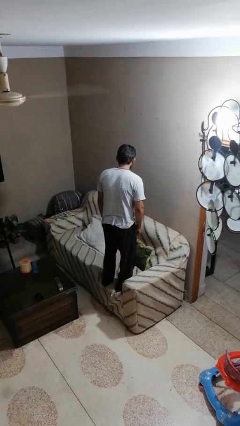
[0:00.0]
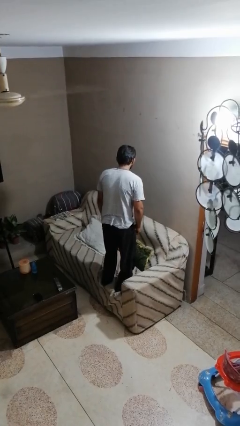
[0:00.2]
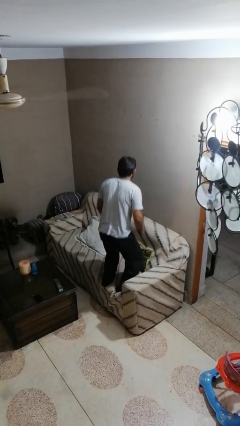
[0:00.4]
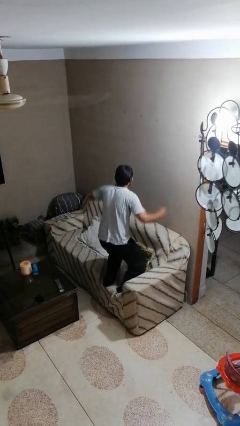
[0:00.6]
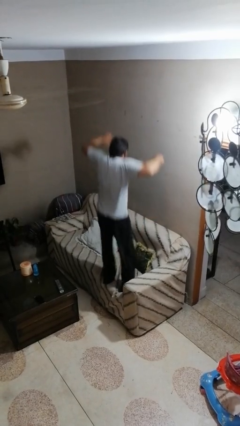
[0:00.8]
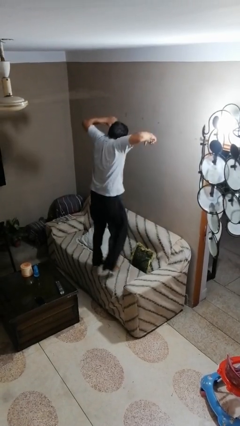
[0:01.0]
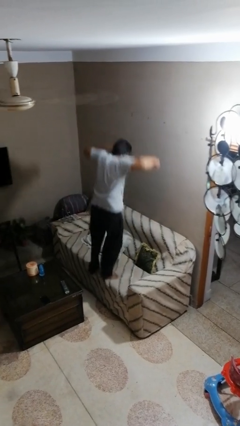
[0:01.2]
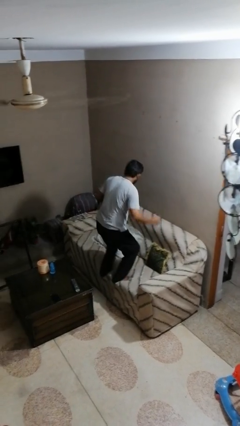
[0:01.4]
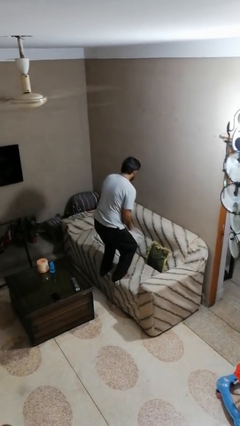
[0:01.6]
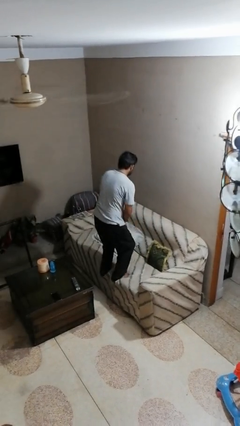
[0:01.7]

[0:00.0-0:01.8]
person jumps on couch

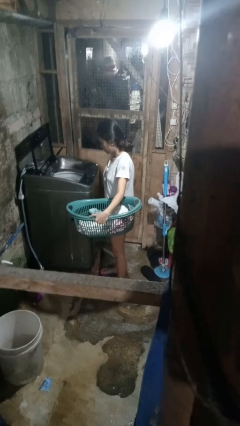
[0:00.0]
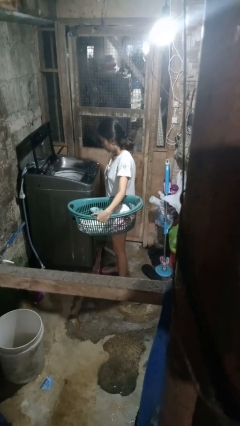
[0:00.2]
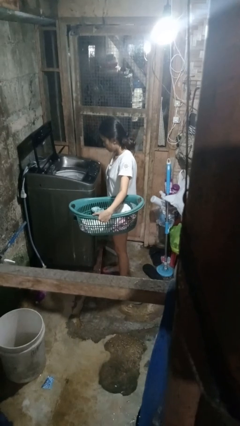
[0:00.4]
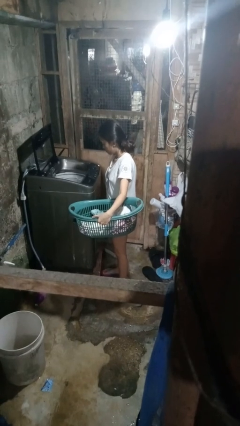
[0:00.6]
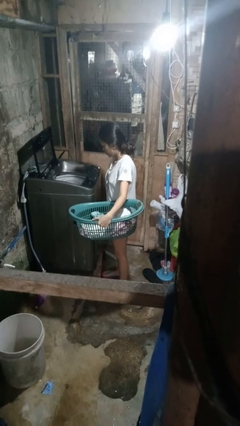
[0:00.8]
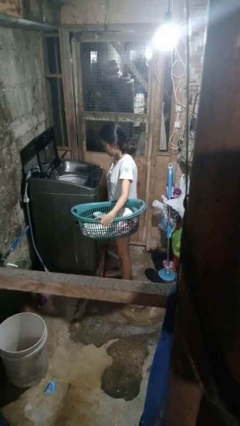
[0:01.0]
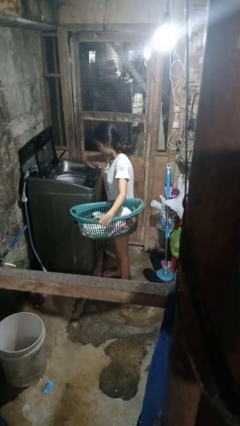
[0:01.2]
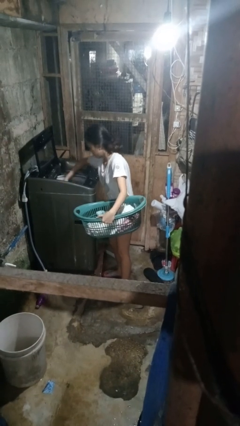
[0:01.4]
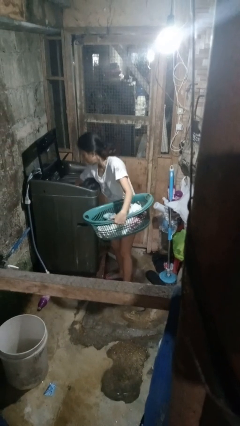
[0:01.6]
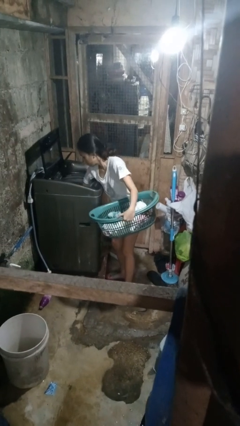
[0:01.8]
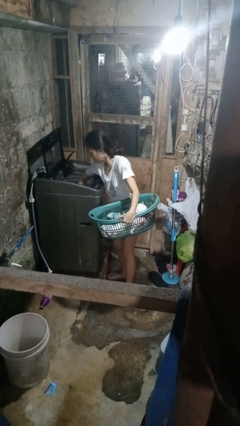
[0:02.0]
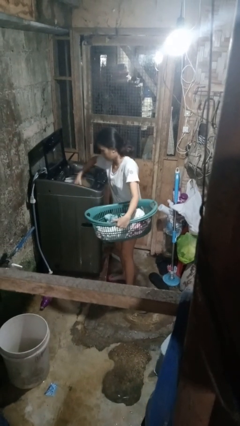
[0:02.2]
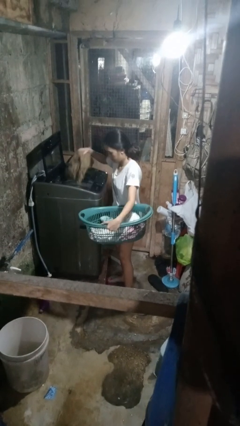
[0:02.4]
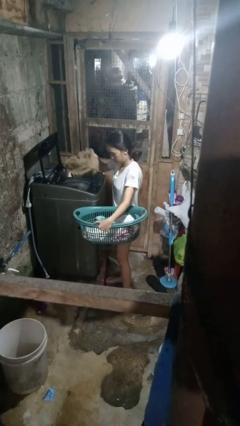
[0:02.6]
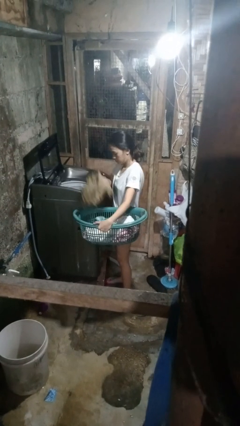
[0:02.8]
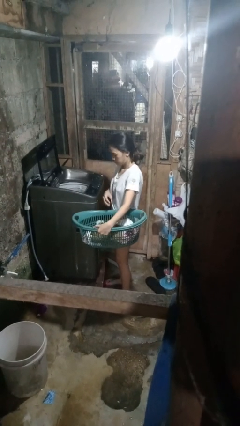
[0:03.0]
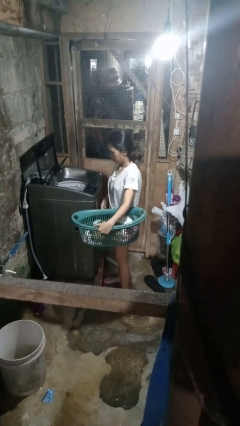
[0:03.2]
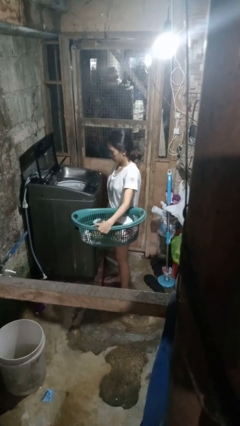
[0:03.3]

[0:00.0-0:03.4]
person unloads clotheswasher

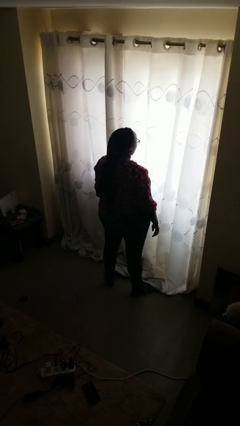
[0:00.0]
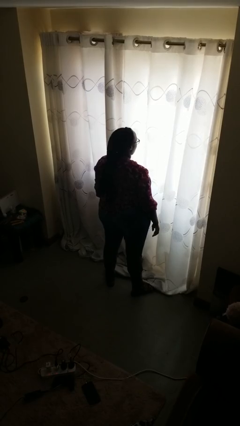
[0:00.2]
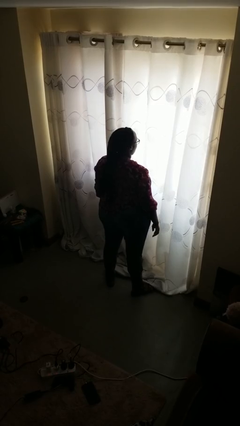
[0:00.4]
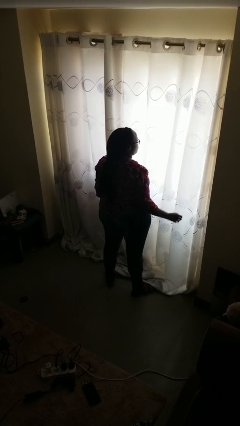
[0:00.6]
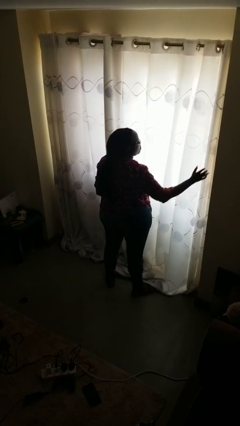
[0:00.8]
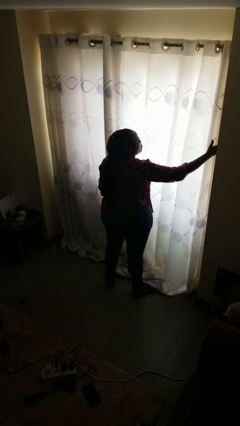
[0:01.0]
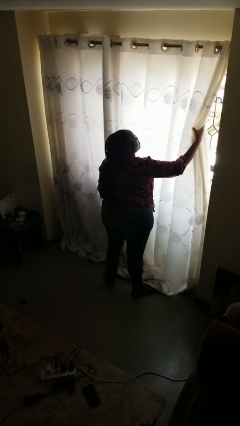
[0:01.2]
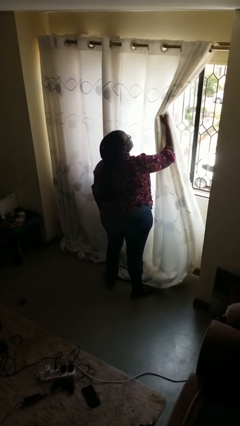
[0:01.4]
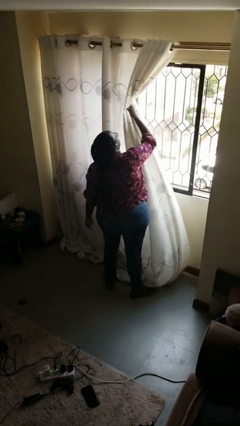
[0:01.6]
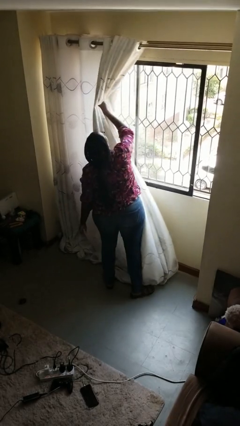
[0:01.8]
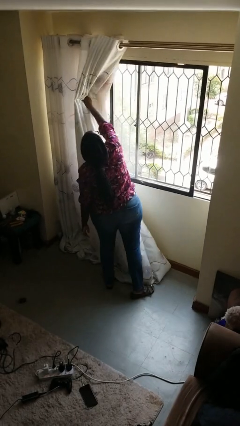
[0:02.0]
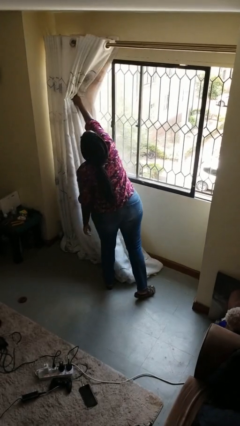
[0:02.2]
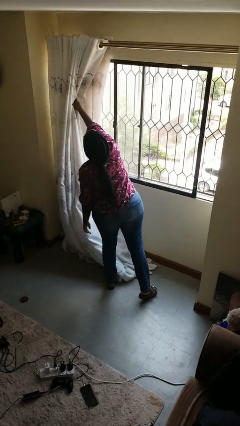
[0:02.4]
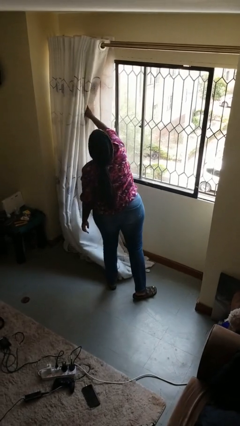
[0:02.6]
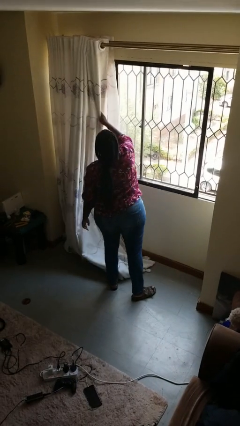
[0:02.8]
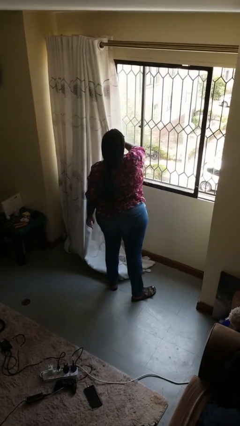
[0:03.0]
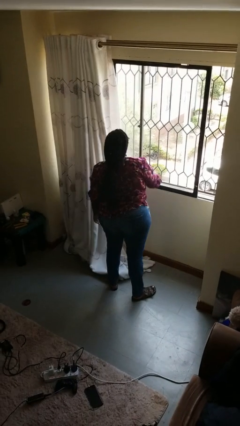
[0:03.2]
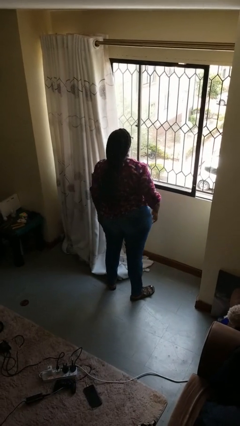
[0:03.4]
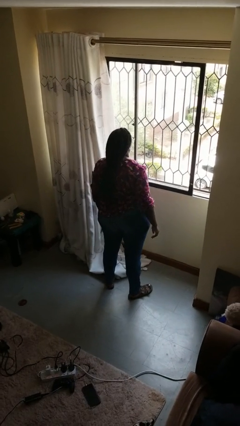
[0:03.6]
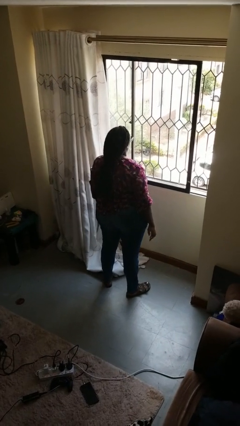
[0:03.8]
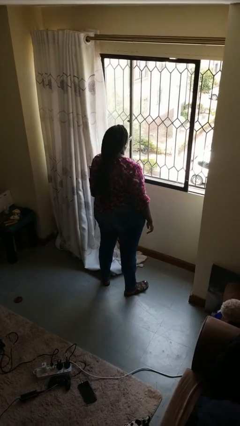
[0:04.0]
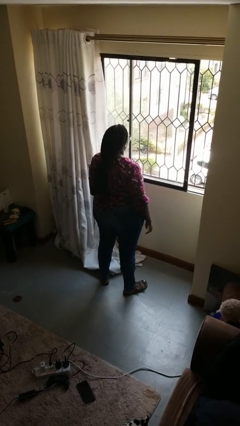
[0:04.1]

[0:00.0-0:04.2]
person opens curtains

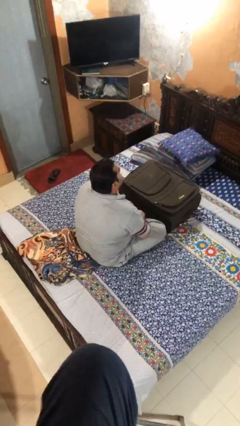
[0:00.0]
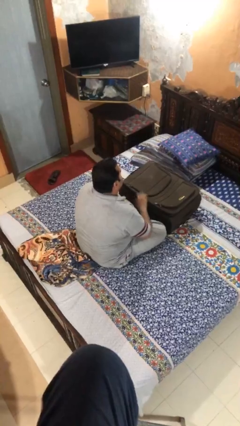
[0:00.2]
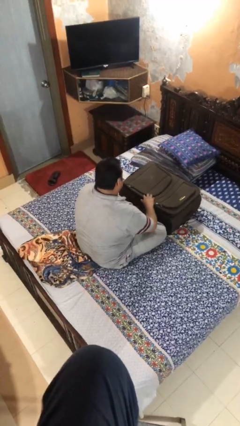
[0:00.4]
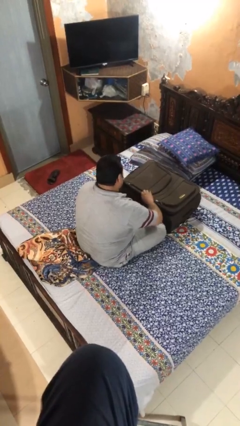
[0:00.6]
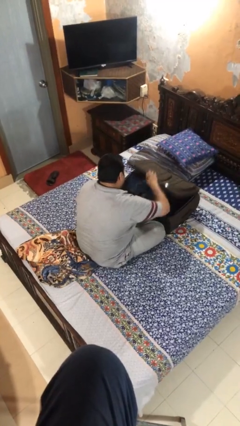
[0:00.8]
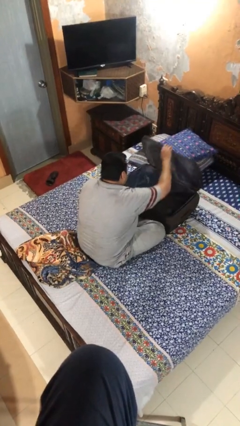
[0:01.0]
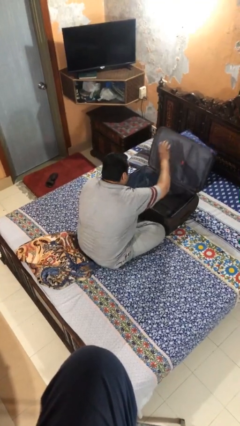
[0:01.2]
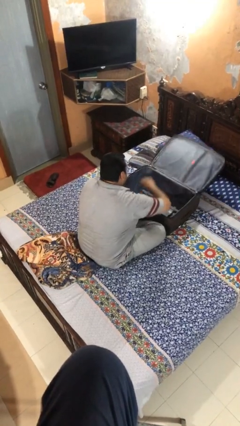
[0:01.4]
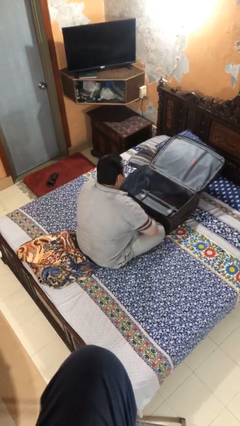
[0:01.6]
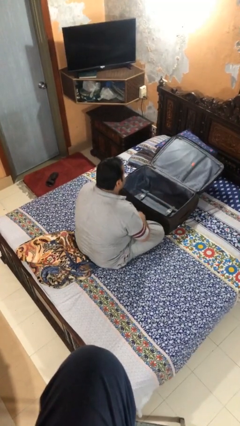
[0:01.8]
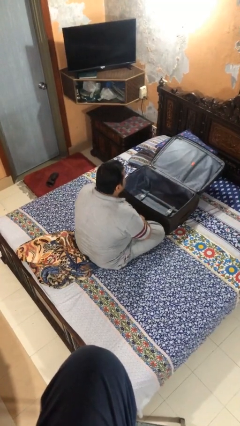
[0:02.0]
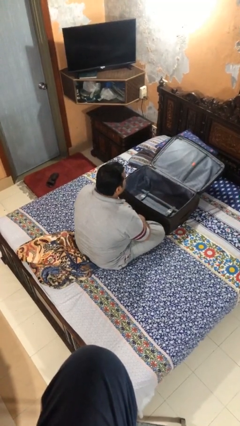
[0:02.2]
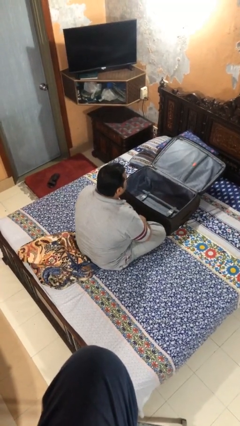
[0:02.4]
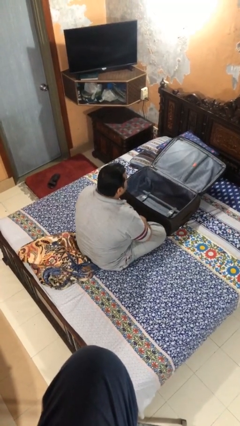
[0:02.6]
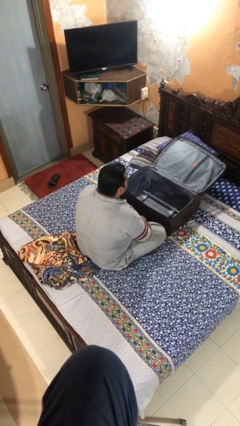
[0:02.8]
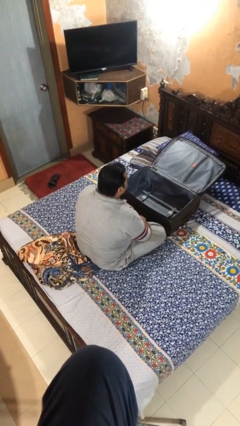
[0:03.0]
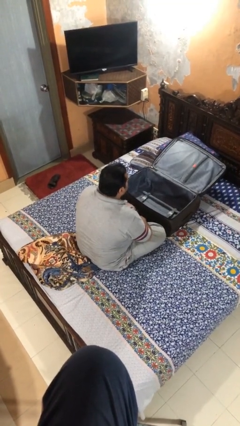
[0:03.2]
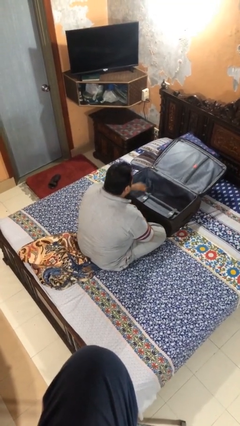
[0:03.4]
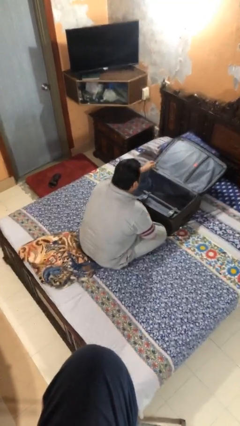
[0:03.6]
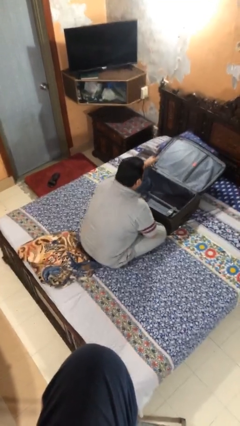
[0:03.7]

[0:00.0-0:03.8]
person opens suitcase

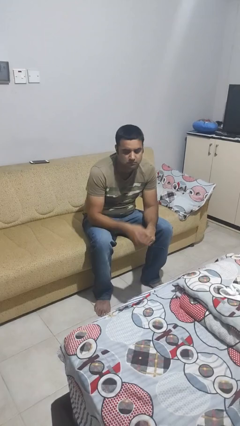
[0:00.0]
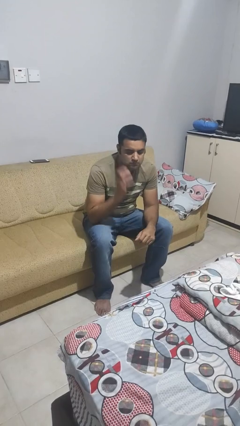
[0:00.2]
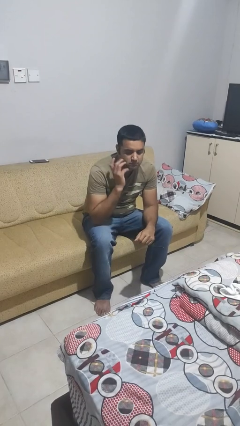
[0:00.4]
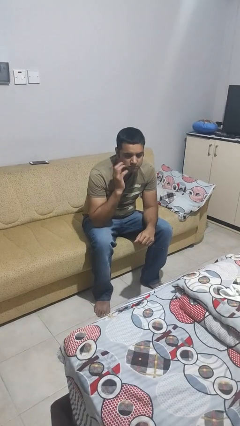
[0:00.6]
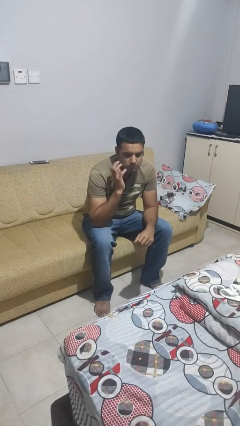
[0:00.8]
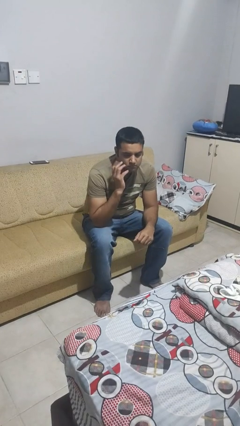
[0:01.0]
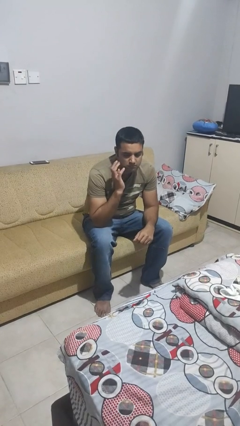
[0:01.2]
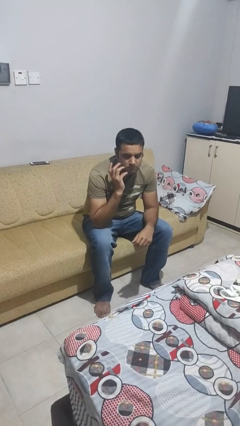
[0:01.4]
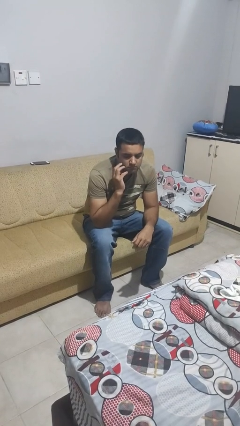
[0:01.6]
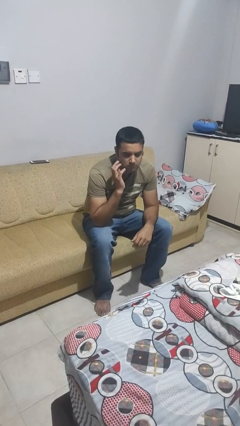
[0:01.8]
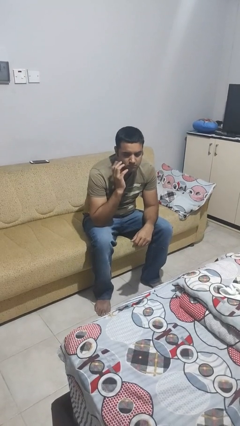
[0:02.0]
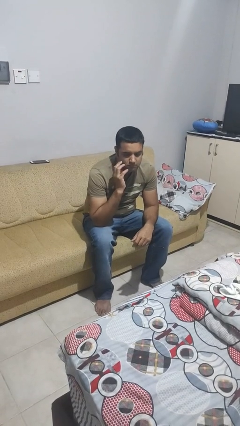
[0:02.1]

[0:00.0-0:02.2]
person strokes chin

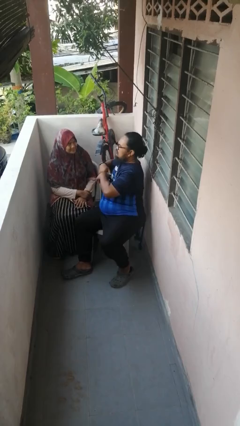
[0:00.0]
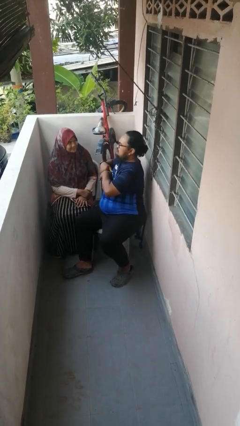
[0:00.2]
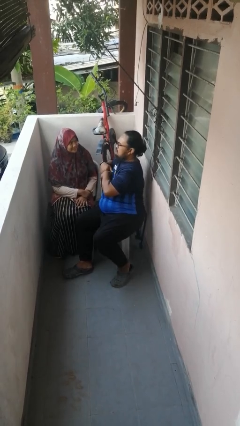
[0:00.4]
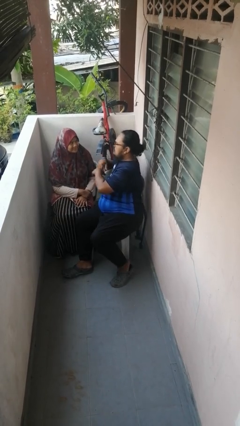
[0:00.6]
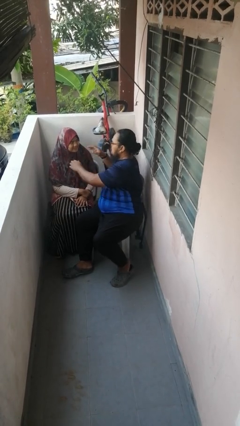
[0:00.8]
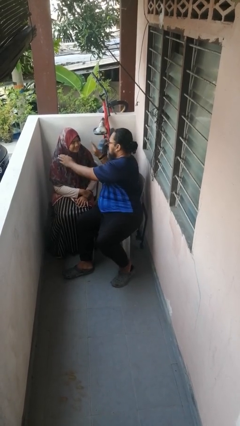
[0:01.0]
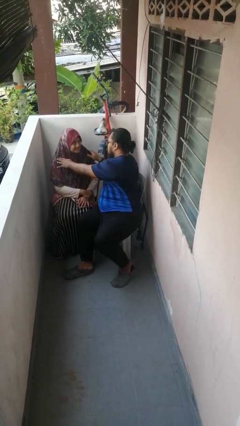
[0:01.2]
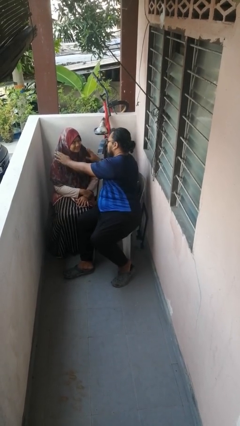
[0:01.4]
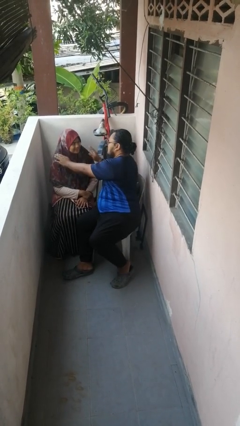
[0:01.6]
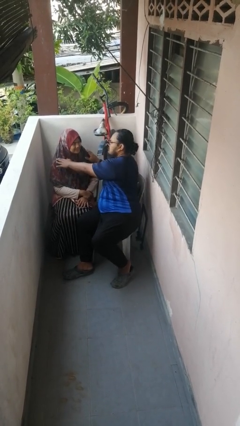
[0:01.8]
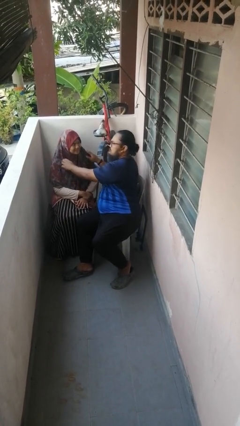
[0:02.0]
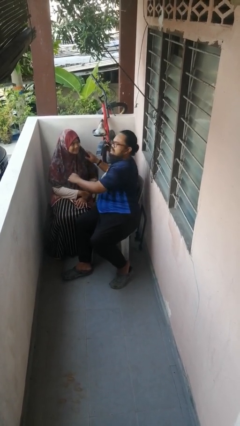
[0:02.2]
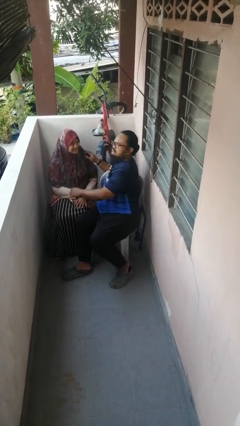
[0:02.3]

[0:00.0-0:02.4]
person pounds shoulders of person
